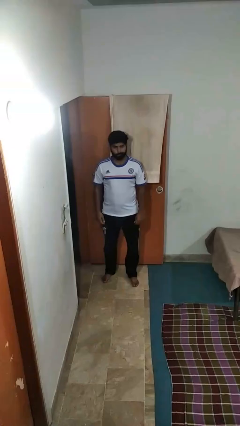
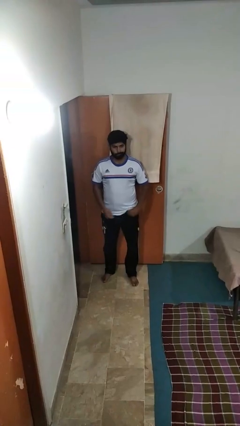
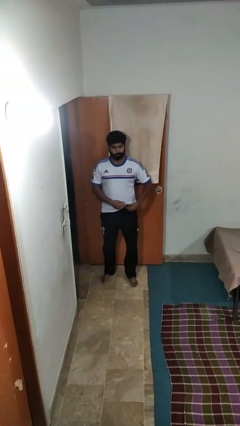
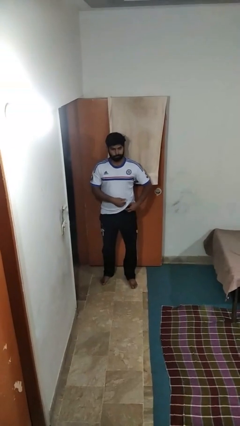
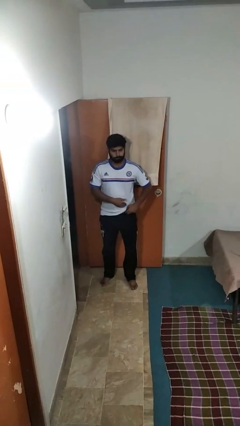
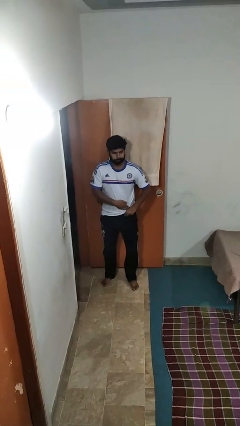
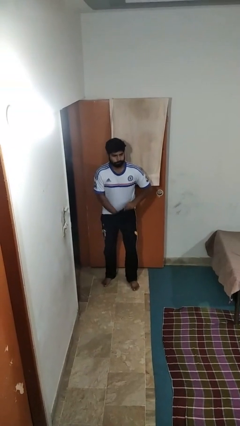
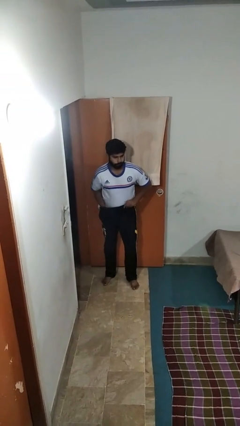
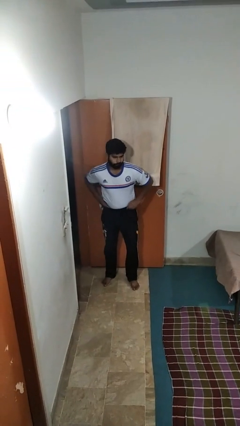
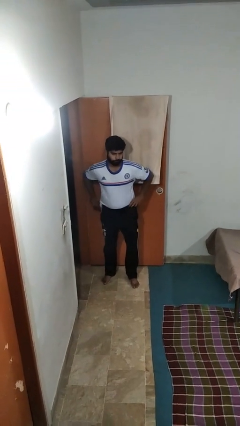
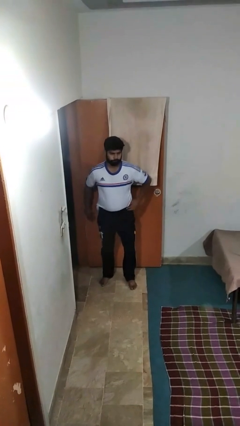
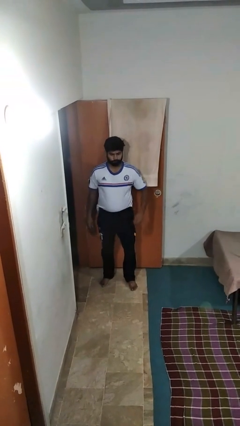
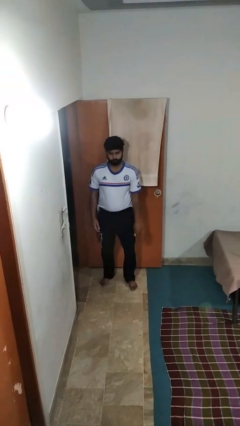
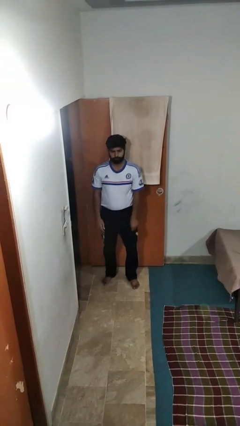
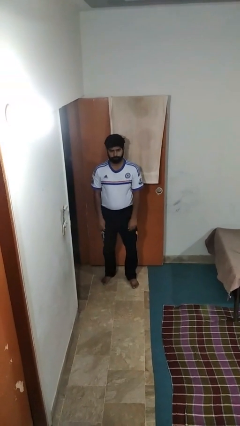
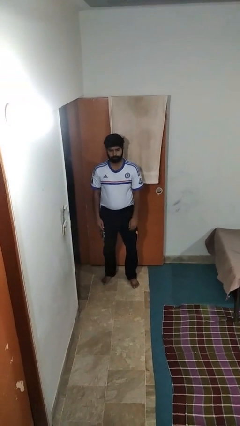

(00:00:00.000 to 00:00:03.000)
person tucks in shirt

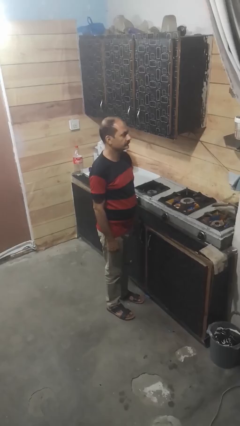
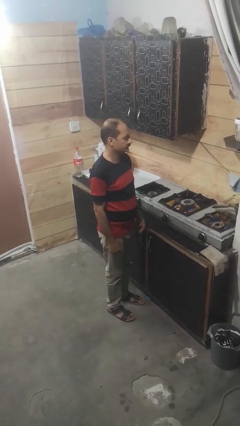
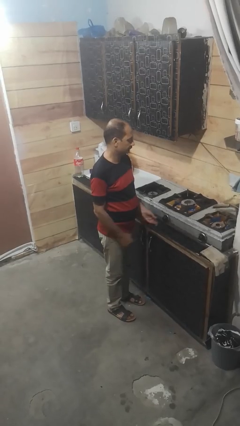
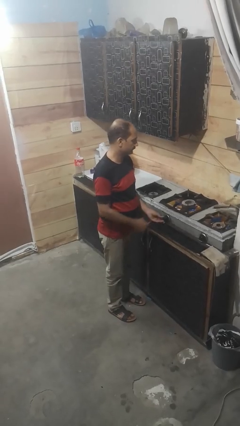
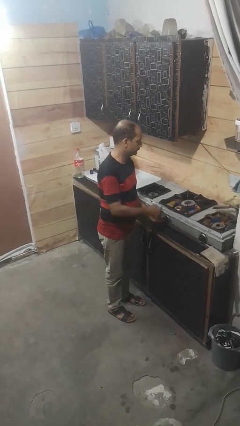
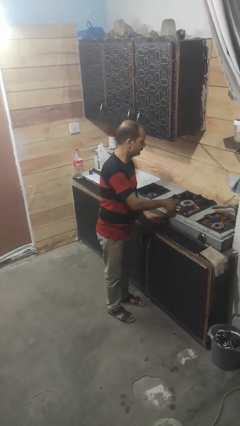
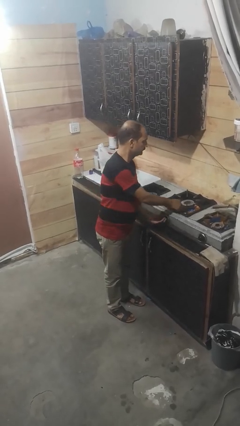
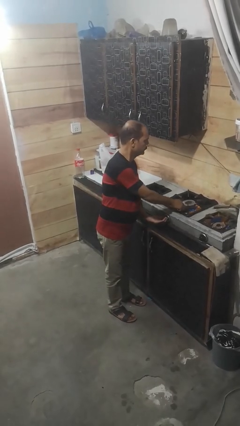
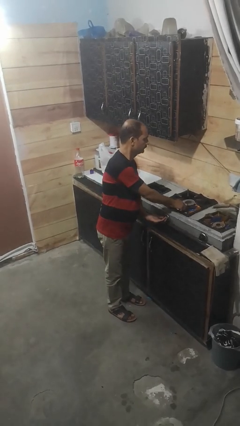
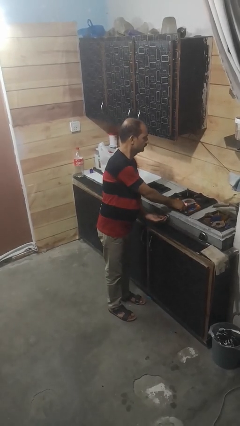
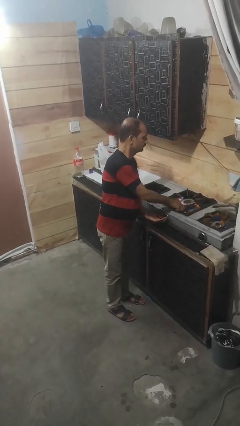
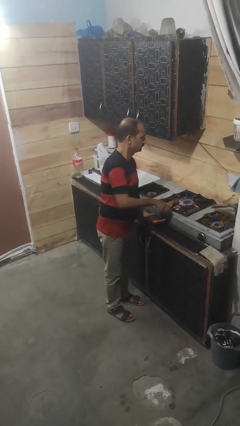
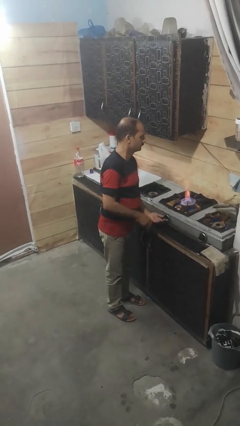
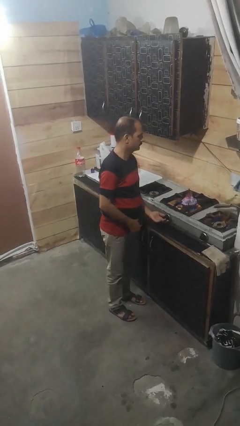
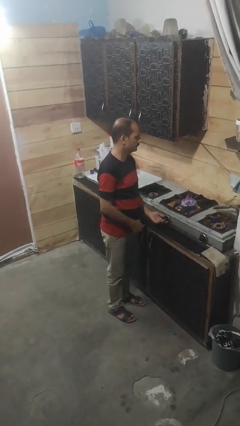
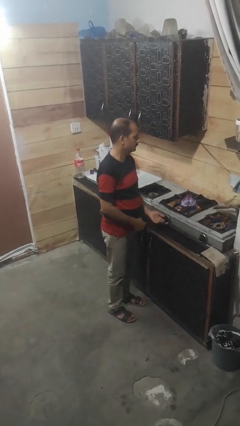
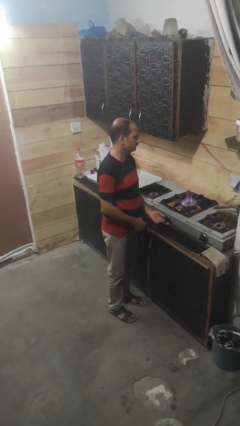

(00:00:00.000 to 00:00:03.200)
person turns on stovetop

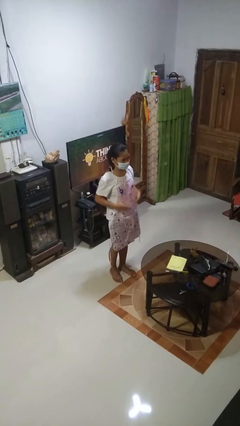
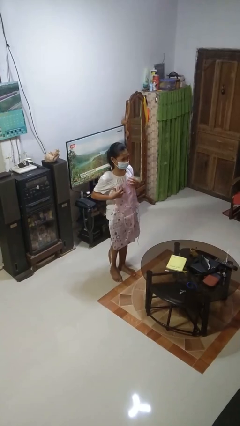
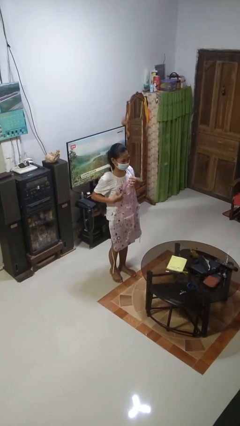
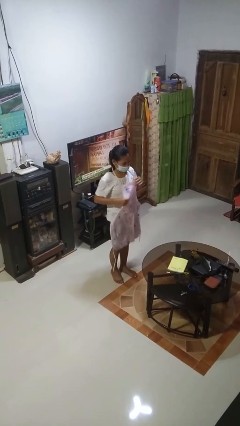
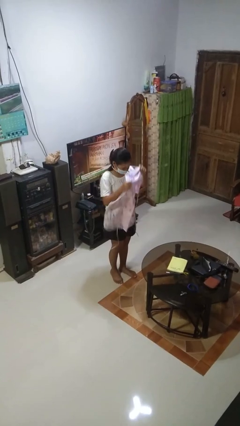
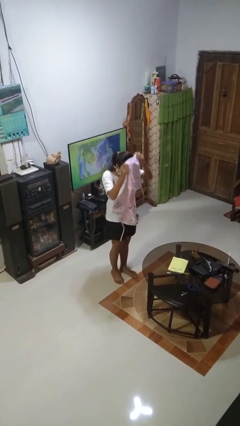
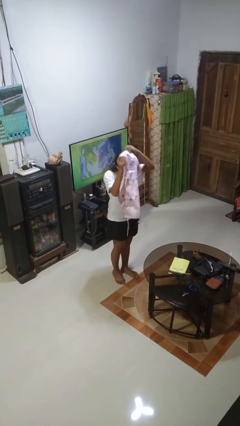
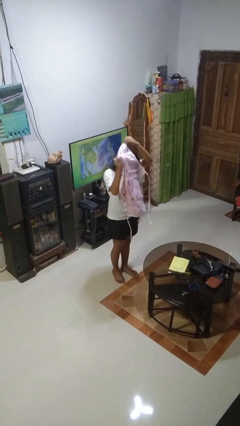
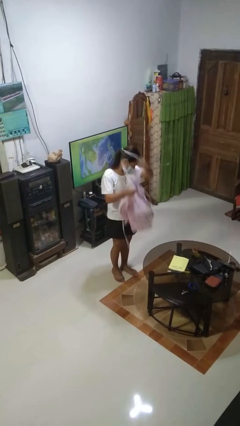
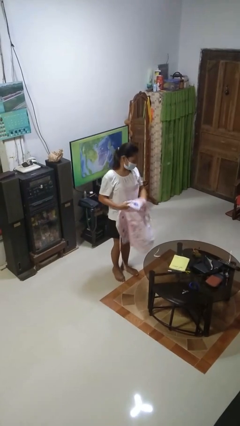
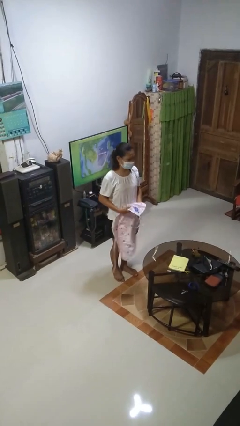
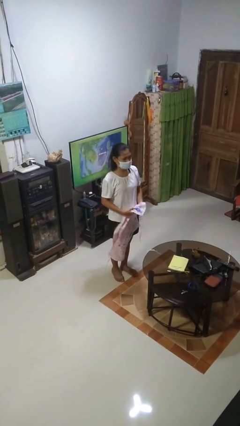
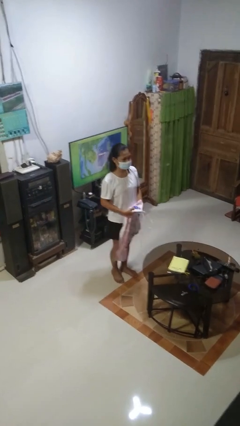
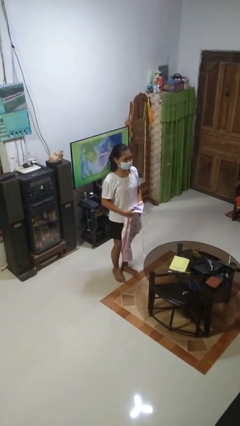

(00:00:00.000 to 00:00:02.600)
person takes off apron

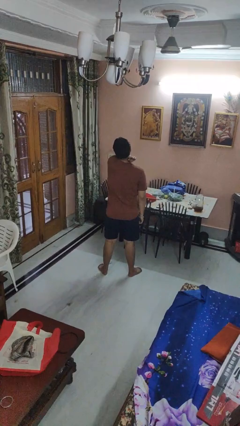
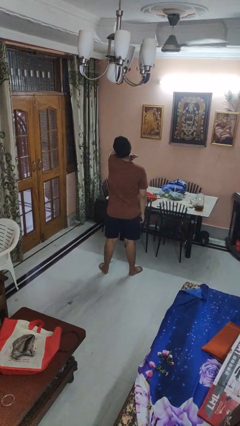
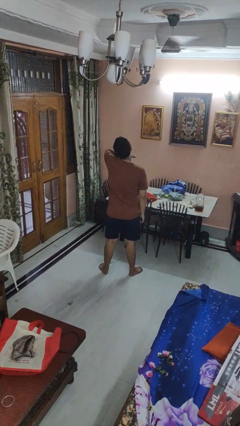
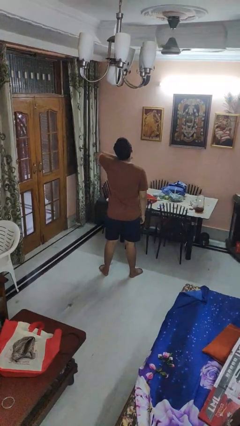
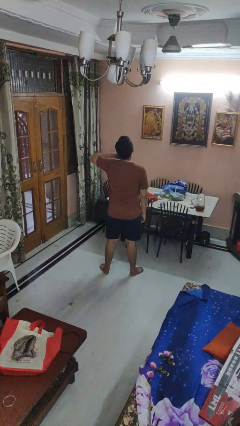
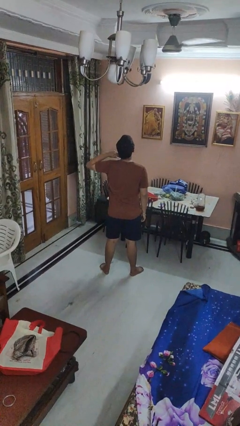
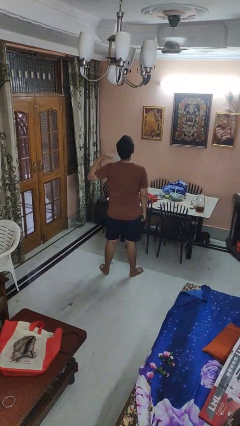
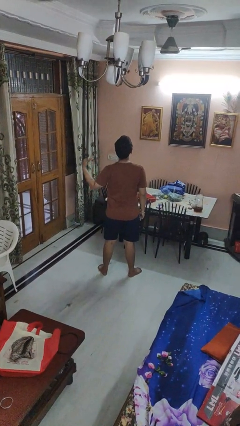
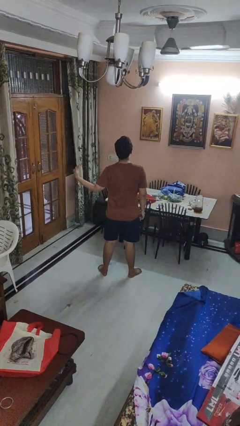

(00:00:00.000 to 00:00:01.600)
person gestures cut

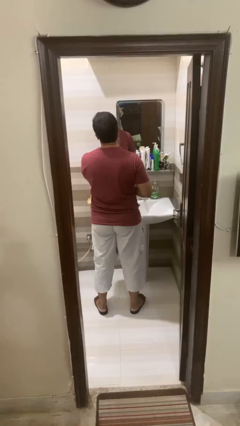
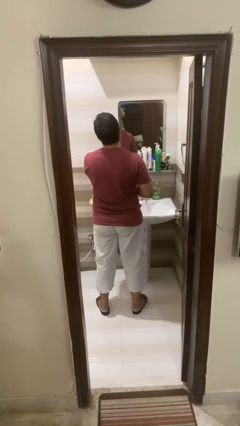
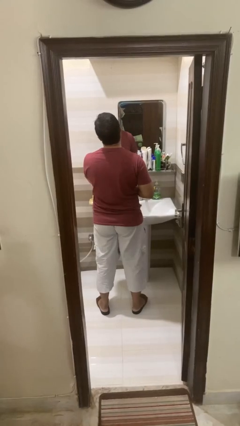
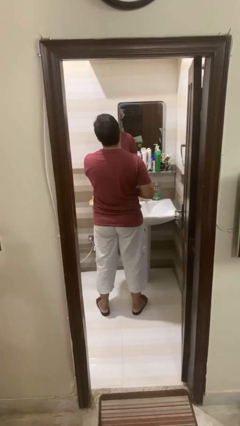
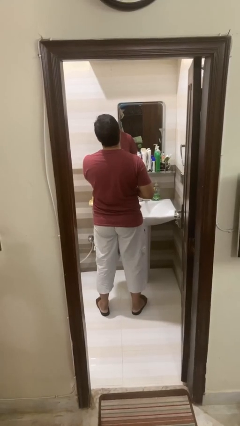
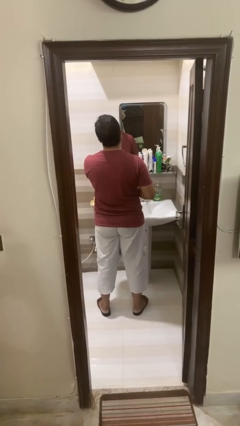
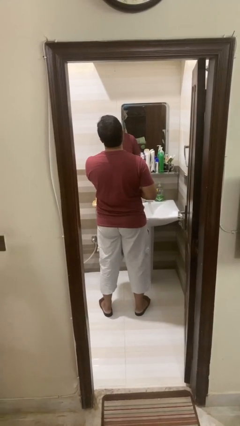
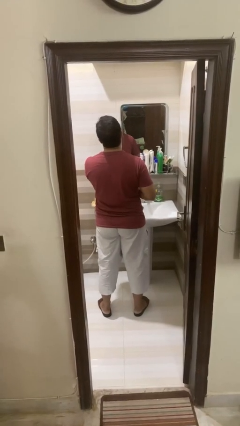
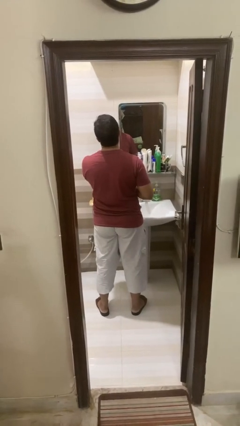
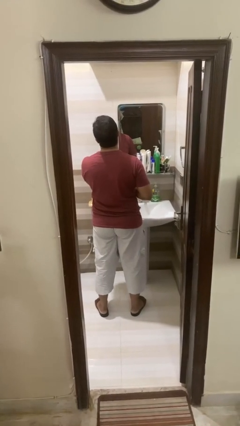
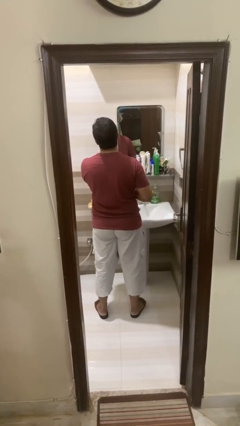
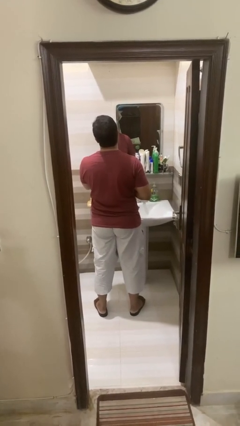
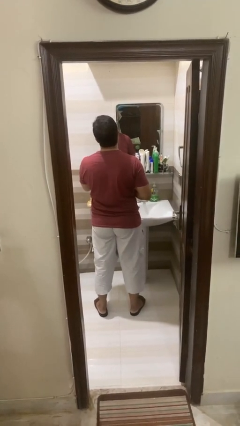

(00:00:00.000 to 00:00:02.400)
person applies shaving cream

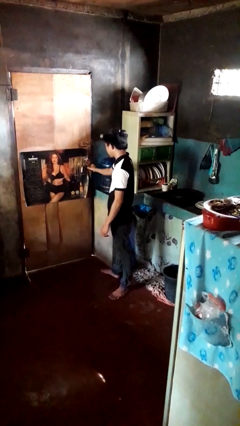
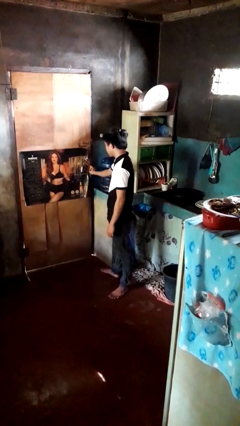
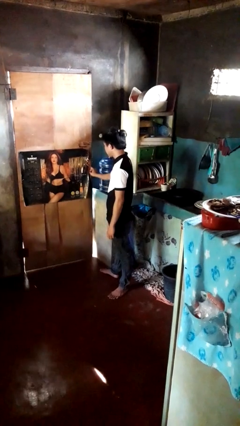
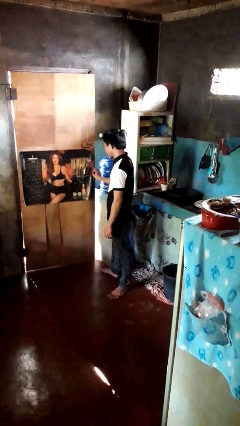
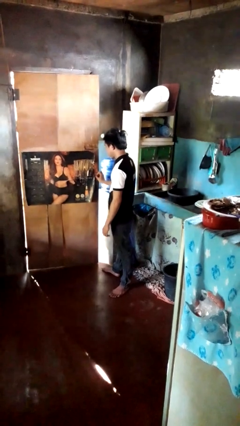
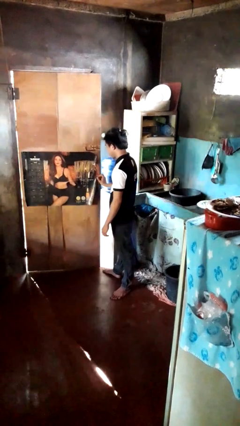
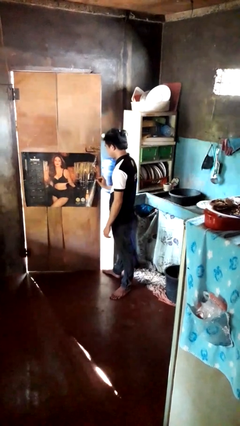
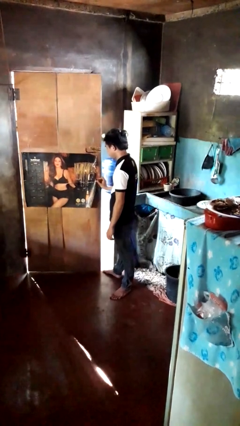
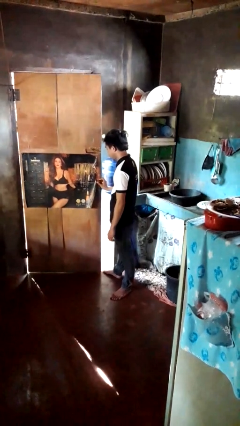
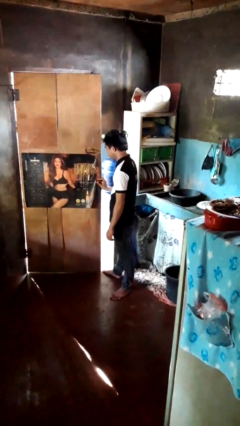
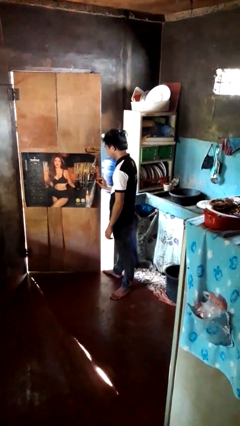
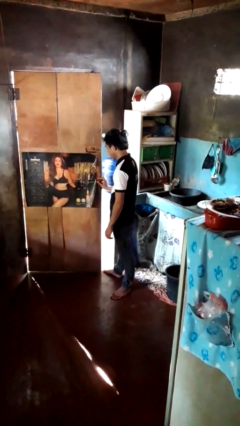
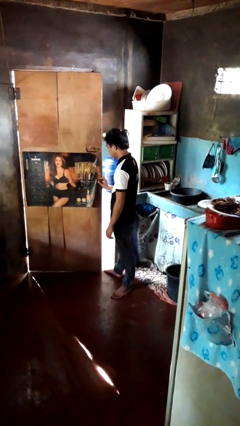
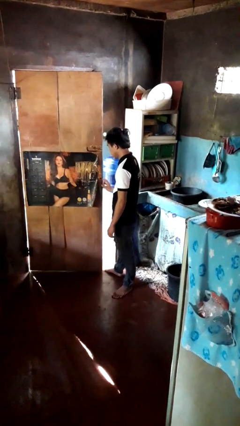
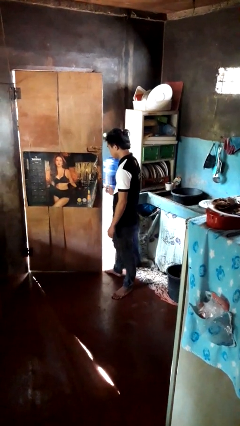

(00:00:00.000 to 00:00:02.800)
person opens facility door

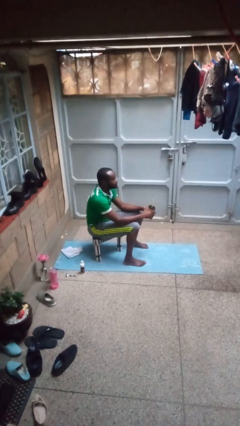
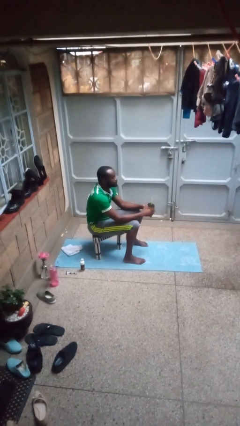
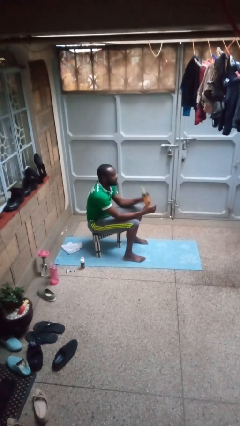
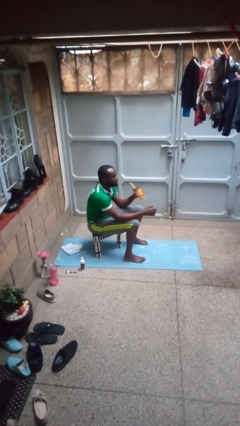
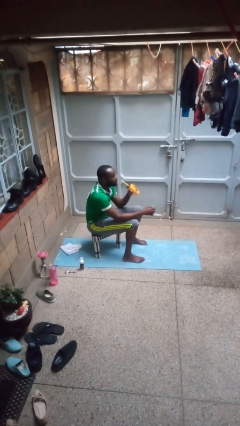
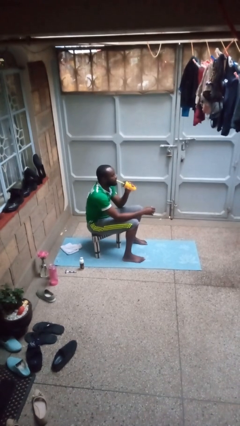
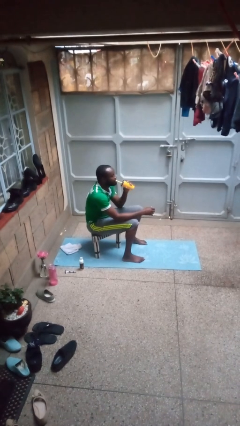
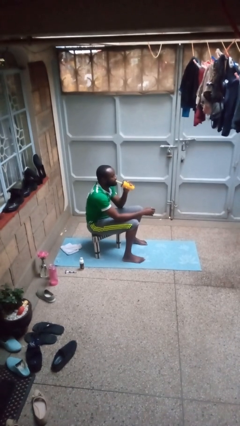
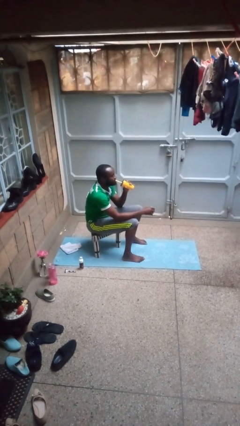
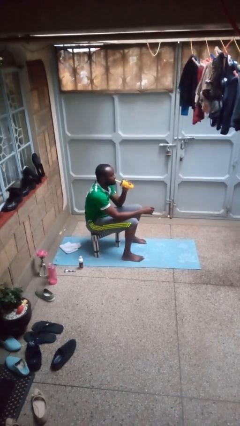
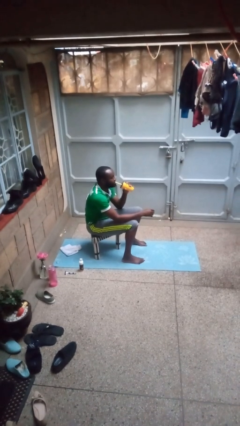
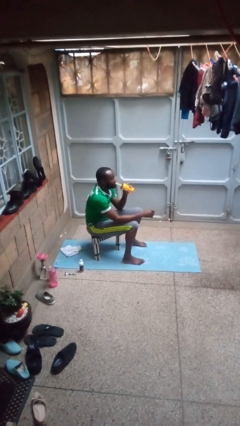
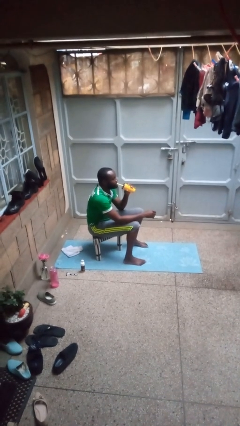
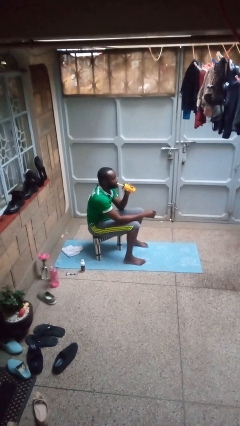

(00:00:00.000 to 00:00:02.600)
person drinks from straw
